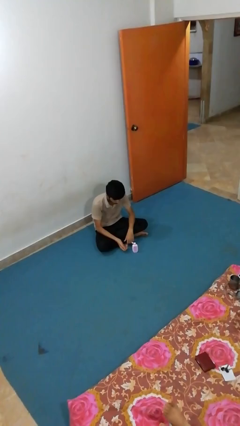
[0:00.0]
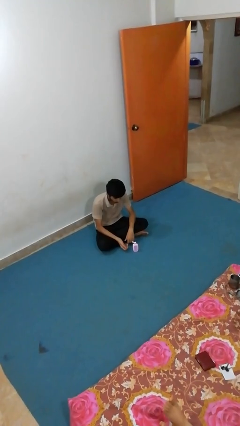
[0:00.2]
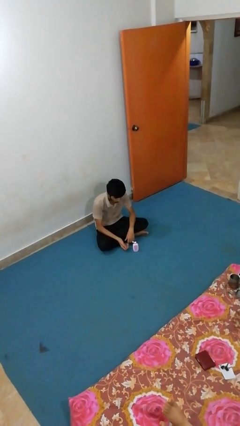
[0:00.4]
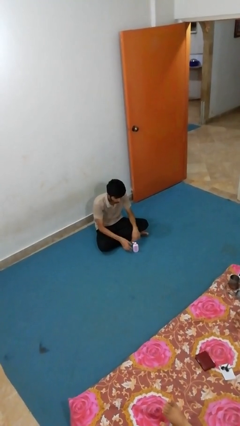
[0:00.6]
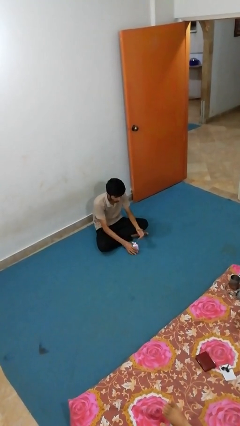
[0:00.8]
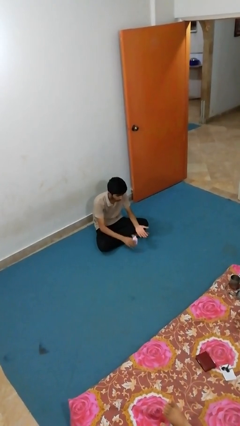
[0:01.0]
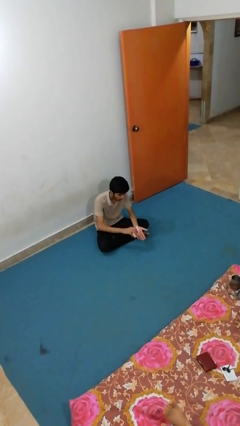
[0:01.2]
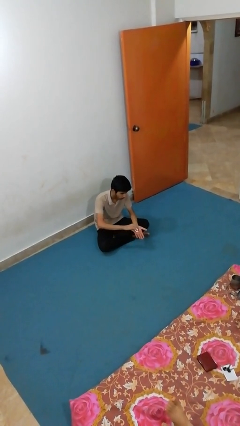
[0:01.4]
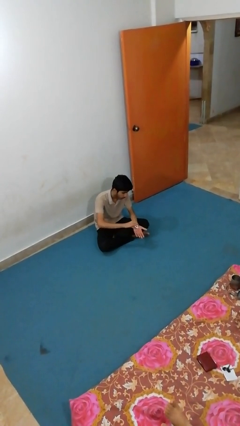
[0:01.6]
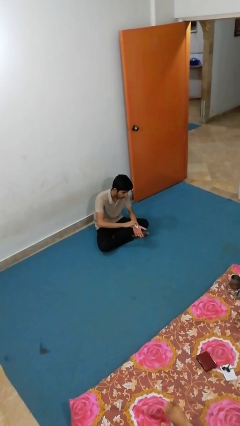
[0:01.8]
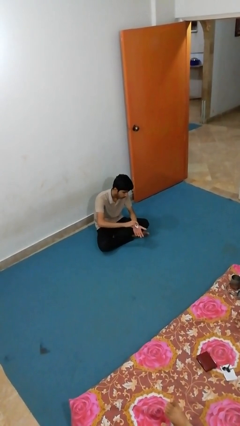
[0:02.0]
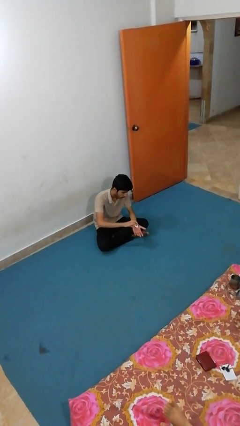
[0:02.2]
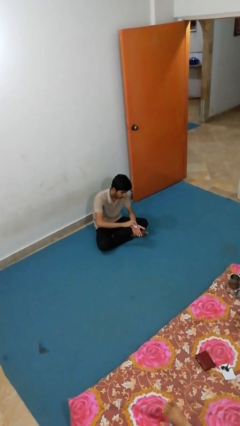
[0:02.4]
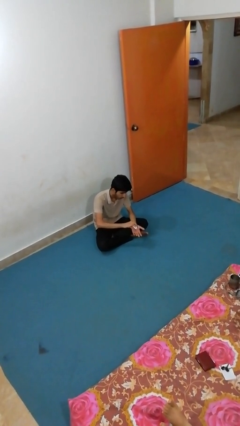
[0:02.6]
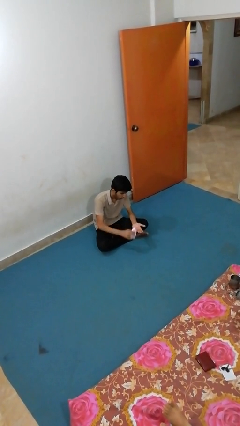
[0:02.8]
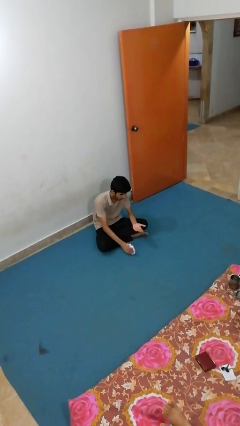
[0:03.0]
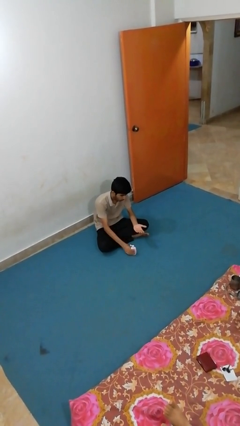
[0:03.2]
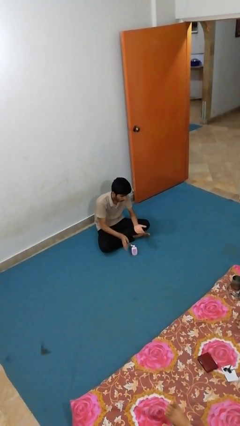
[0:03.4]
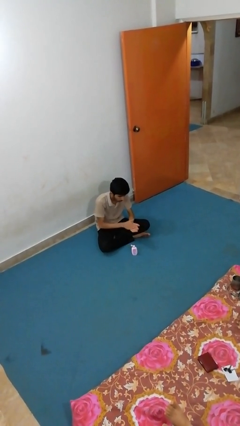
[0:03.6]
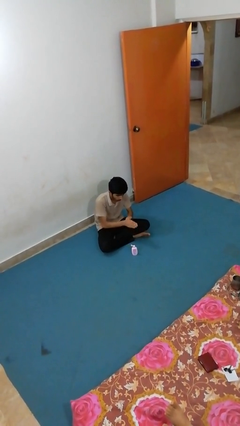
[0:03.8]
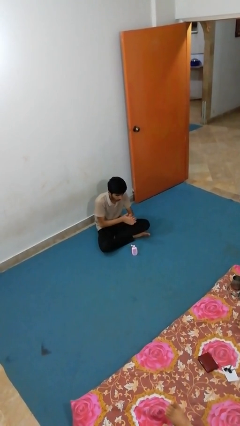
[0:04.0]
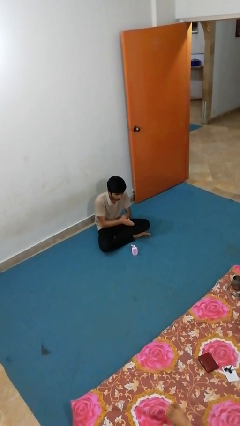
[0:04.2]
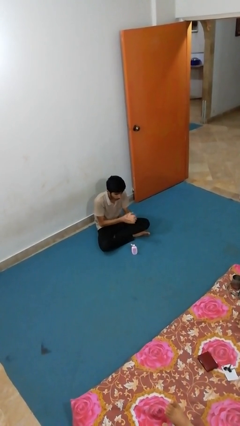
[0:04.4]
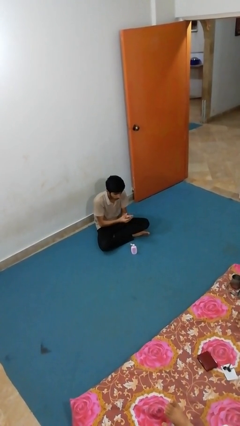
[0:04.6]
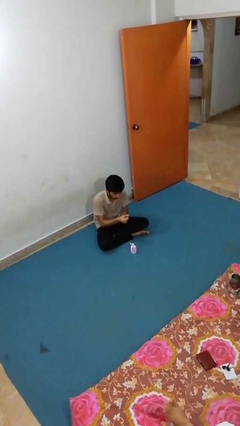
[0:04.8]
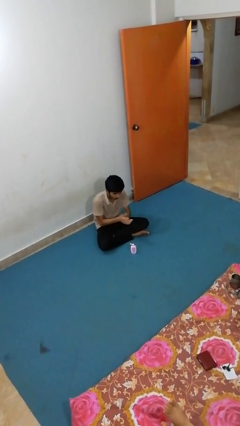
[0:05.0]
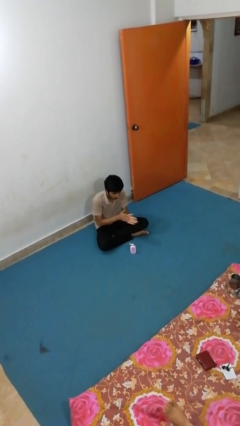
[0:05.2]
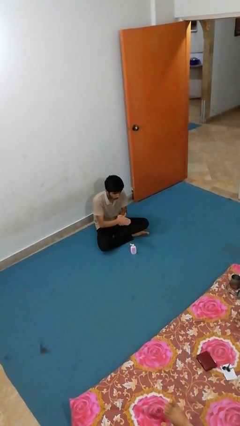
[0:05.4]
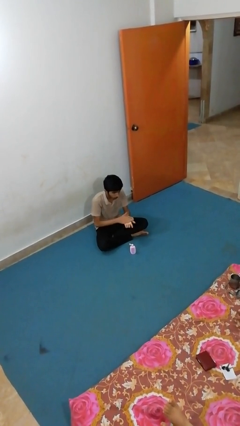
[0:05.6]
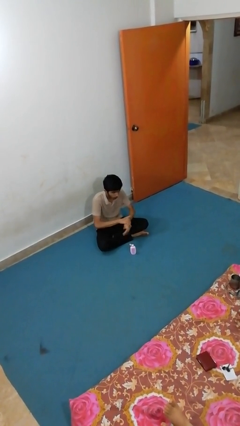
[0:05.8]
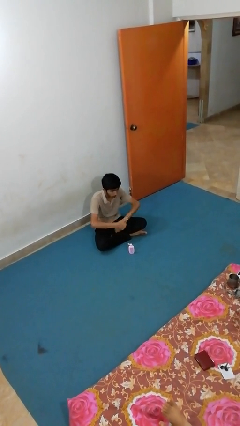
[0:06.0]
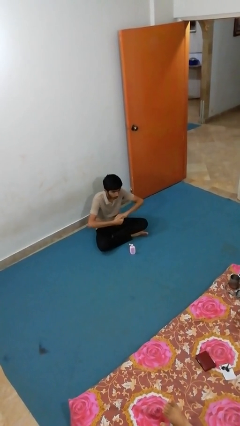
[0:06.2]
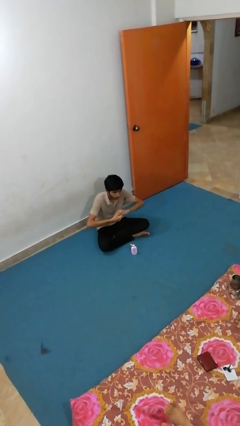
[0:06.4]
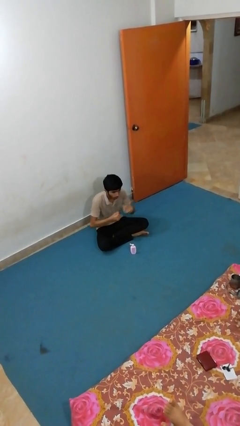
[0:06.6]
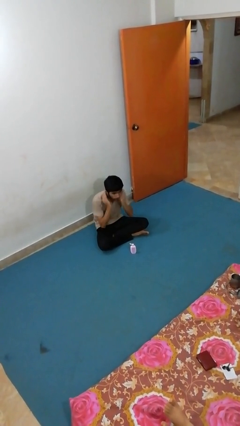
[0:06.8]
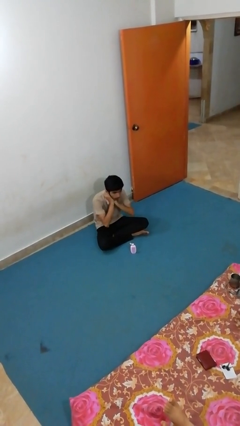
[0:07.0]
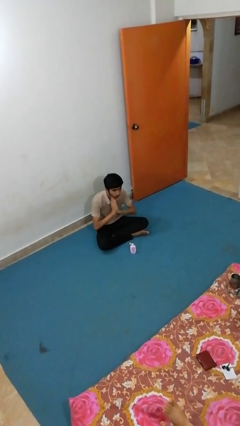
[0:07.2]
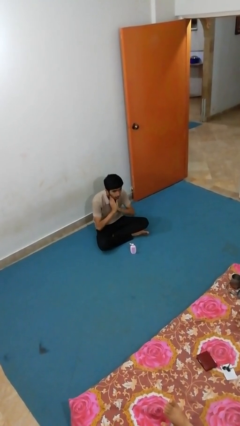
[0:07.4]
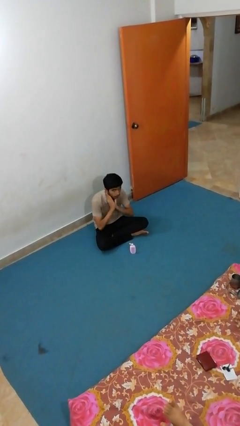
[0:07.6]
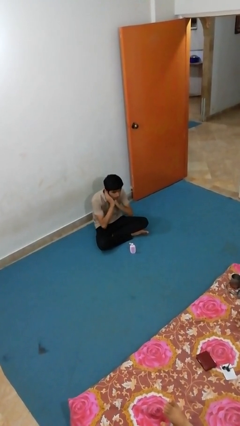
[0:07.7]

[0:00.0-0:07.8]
person applies sunscreen

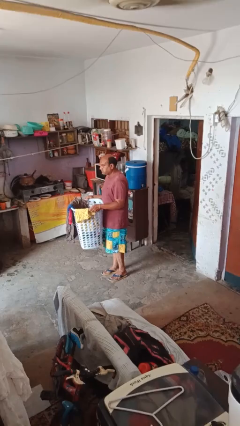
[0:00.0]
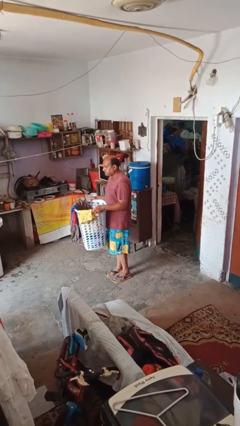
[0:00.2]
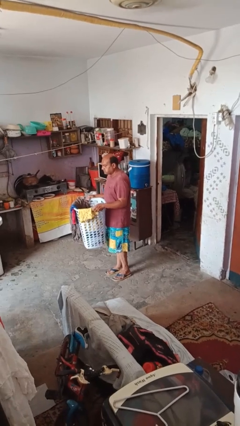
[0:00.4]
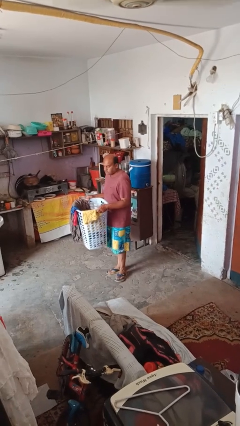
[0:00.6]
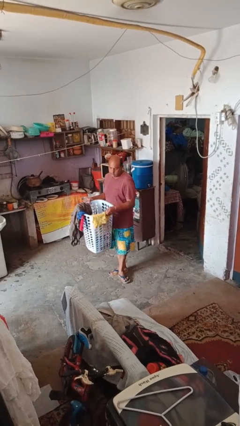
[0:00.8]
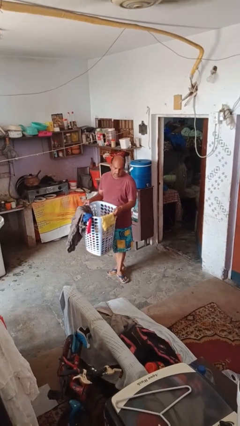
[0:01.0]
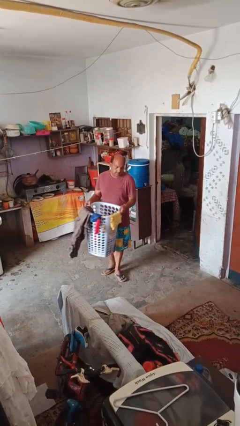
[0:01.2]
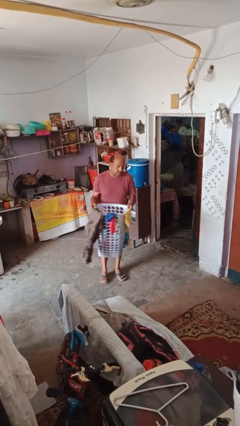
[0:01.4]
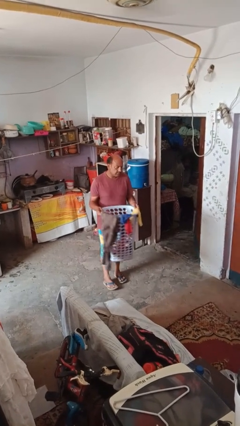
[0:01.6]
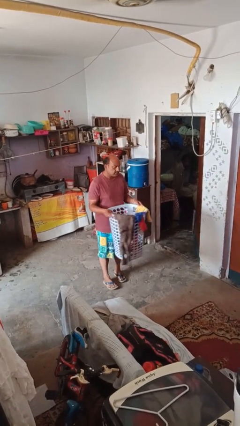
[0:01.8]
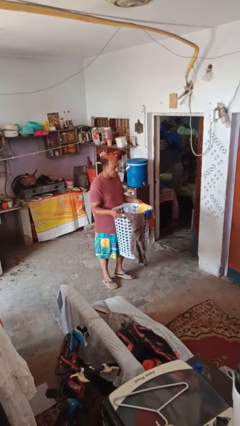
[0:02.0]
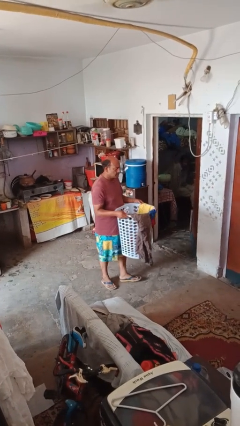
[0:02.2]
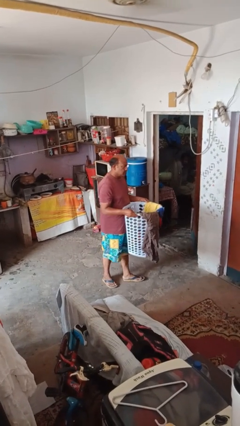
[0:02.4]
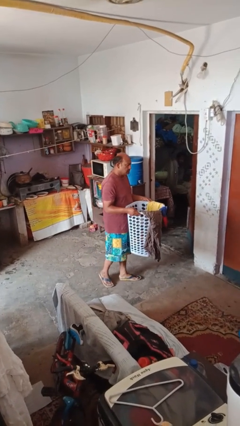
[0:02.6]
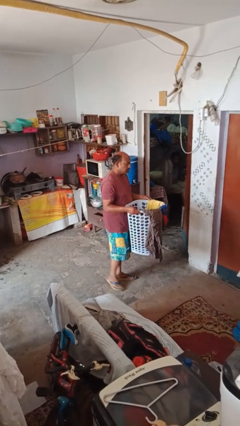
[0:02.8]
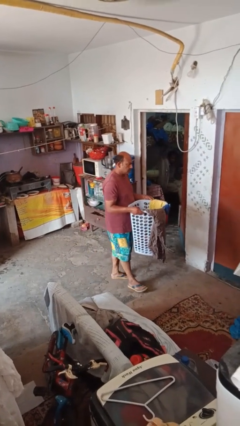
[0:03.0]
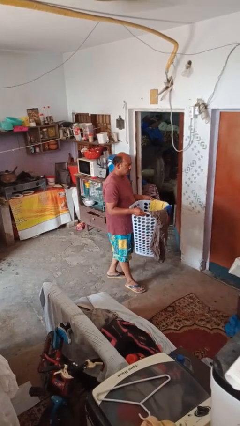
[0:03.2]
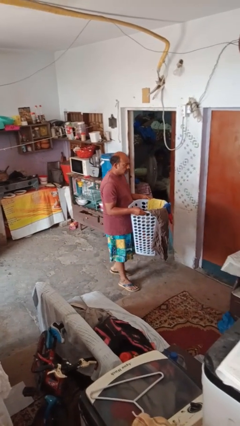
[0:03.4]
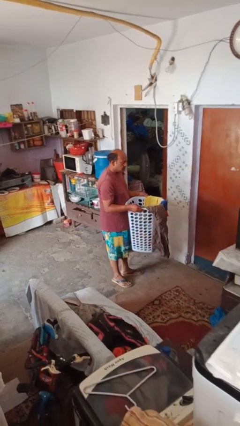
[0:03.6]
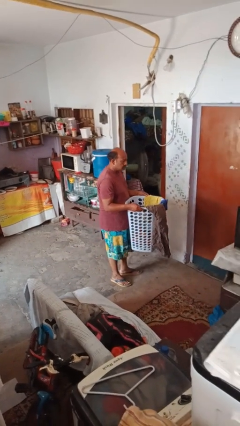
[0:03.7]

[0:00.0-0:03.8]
person carries laundry basket

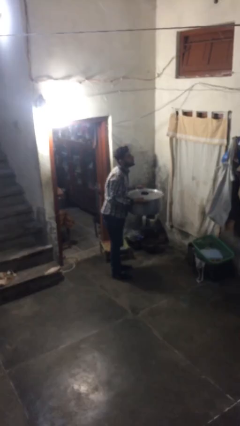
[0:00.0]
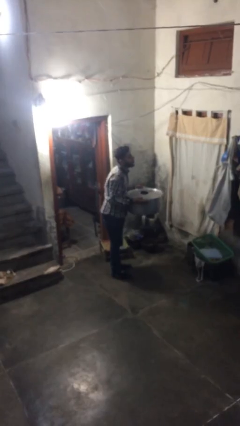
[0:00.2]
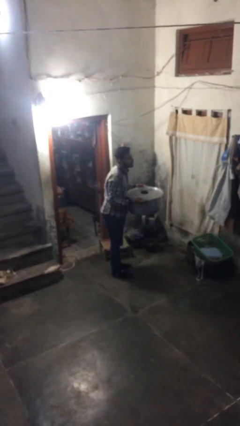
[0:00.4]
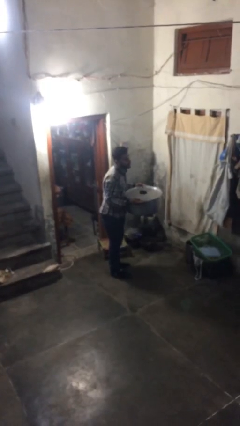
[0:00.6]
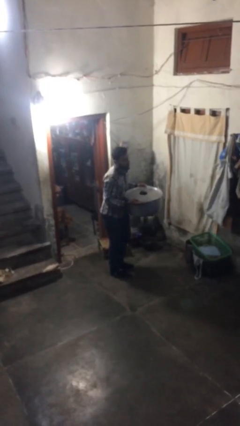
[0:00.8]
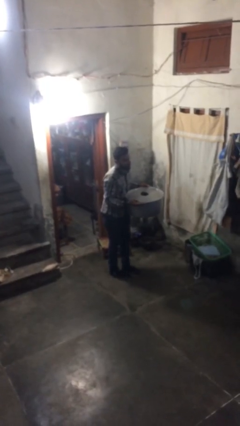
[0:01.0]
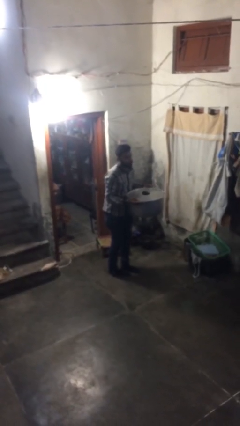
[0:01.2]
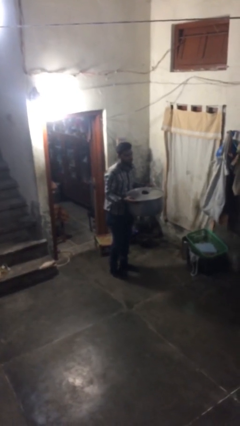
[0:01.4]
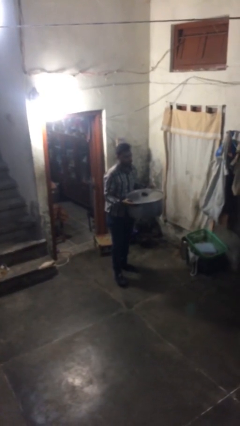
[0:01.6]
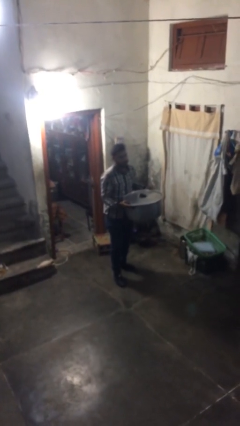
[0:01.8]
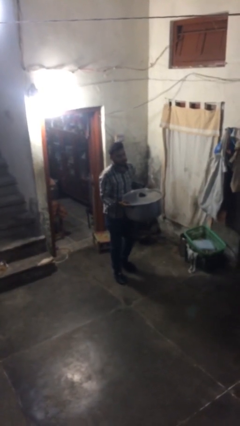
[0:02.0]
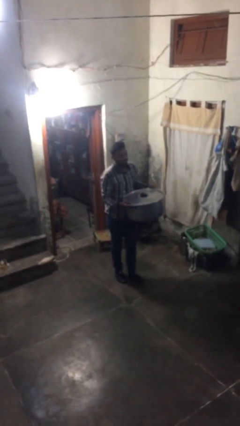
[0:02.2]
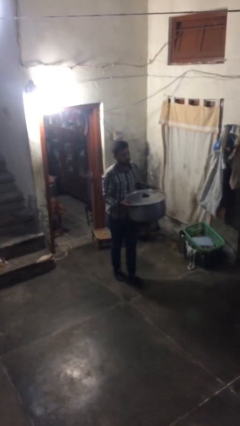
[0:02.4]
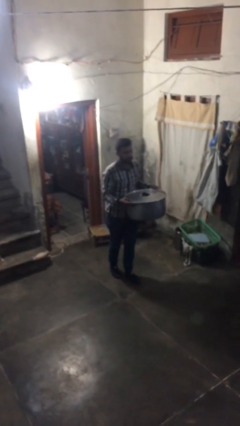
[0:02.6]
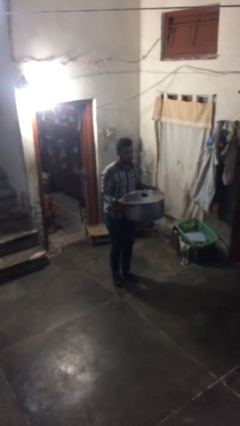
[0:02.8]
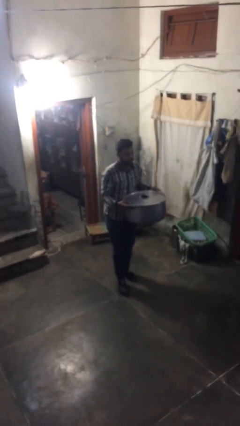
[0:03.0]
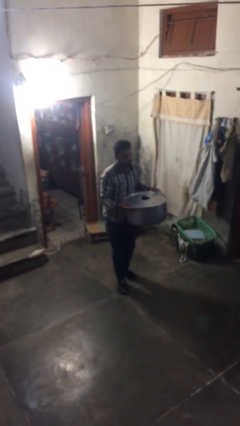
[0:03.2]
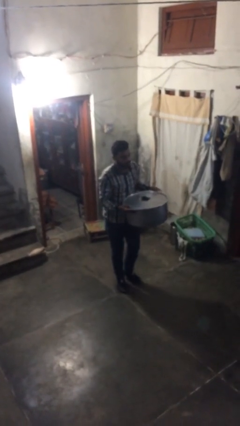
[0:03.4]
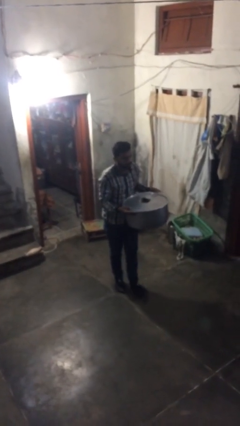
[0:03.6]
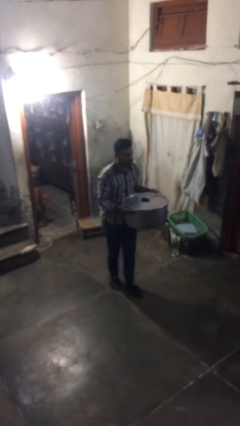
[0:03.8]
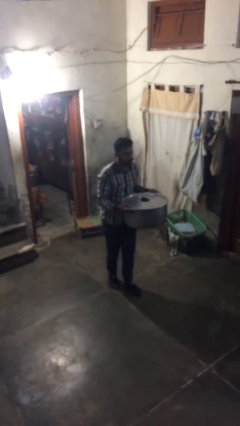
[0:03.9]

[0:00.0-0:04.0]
person carries heavy object

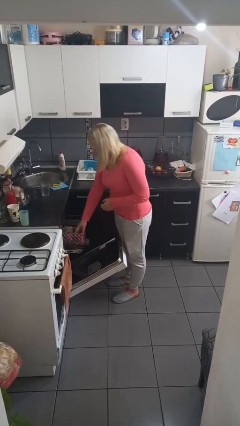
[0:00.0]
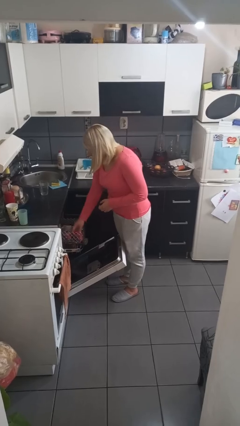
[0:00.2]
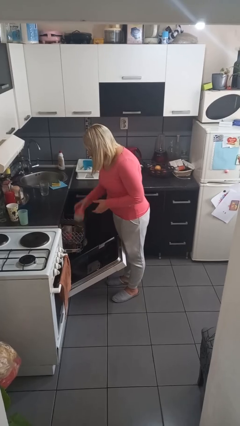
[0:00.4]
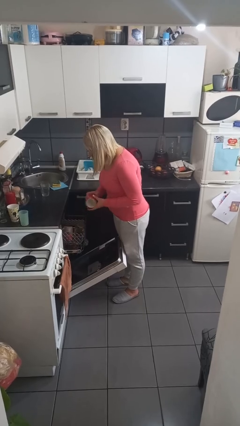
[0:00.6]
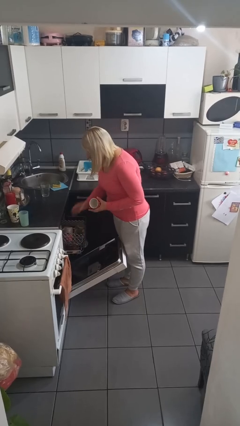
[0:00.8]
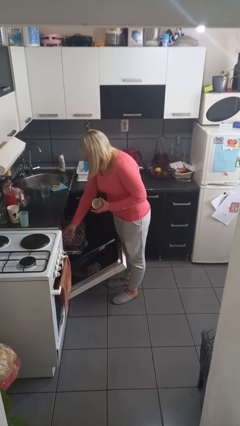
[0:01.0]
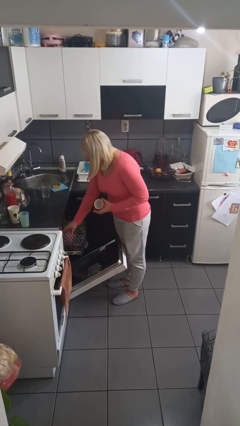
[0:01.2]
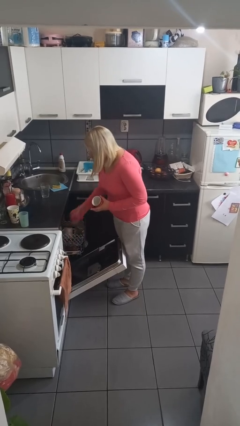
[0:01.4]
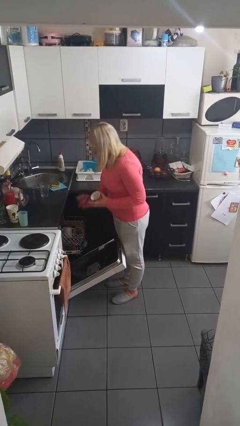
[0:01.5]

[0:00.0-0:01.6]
person unloads dishwasher
